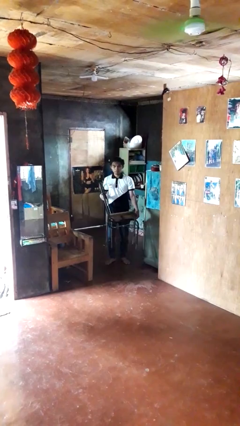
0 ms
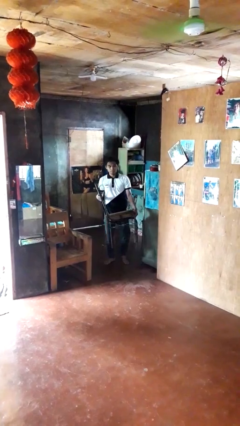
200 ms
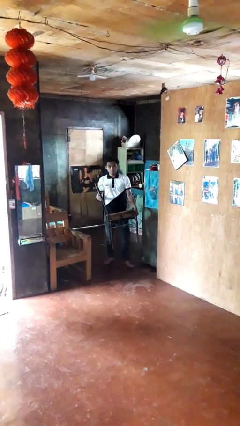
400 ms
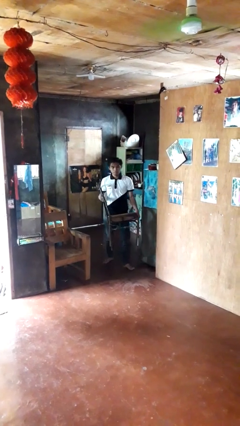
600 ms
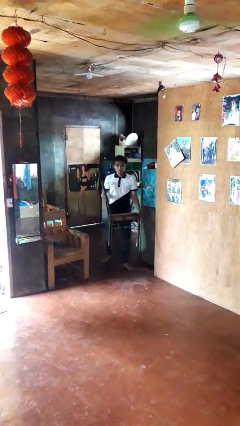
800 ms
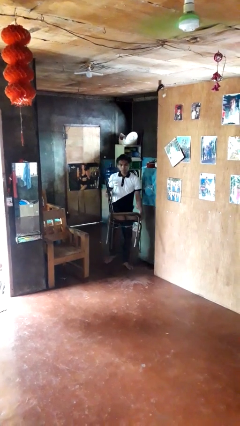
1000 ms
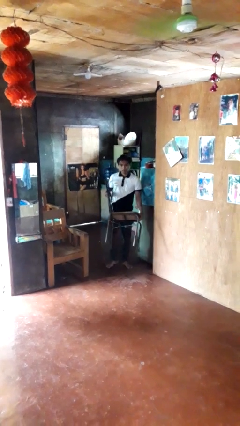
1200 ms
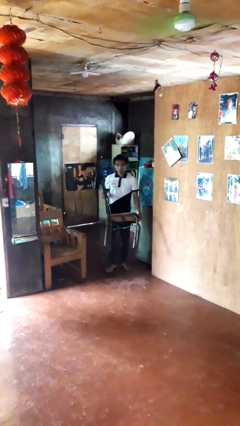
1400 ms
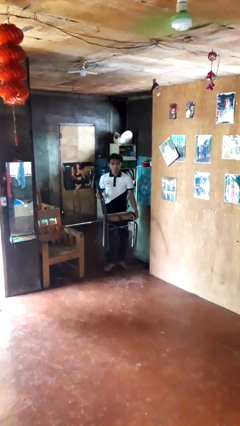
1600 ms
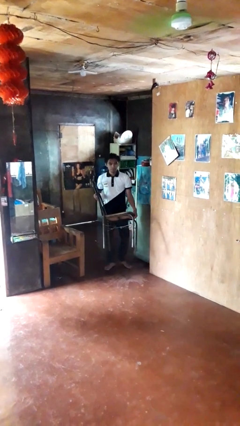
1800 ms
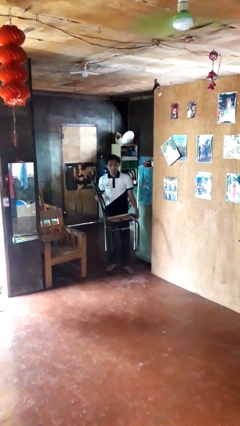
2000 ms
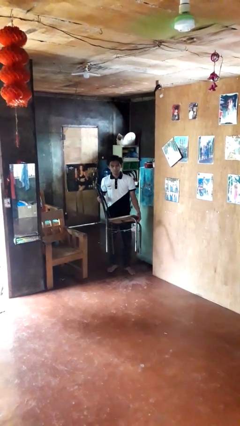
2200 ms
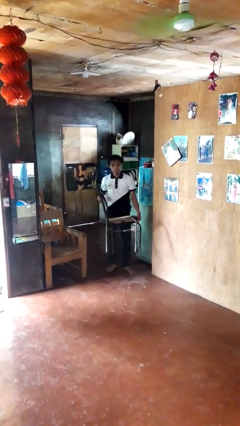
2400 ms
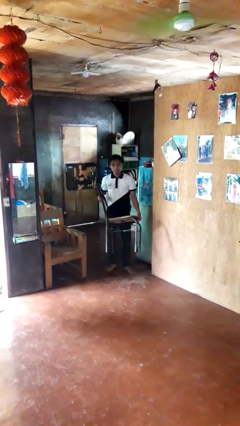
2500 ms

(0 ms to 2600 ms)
person carries furniture

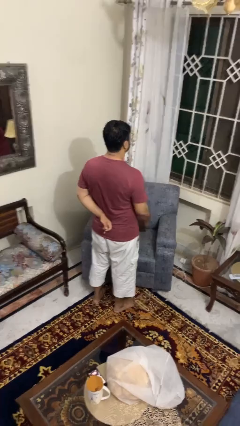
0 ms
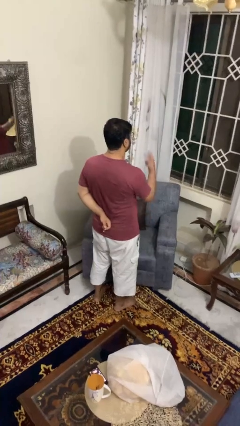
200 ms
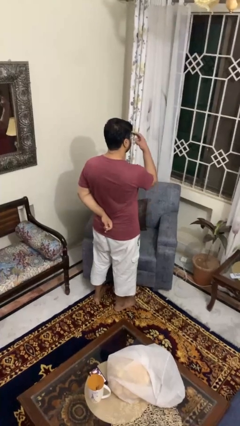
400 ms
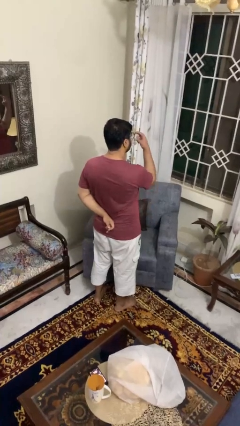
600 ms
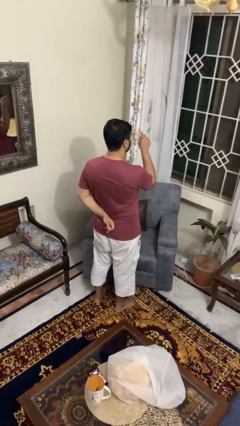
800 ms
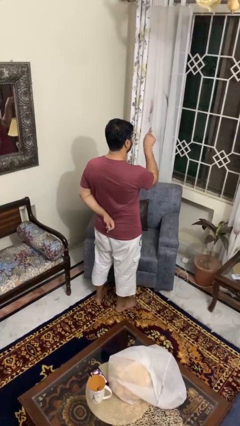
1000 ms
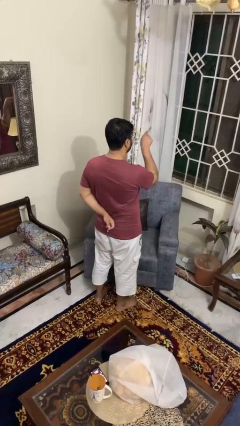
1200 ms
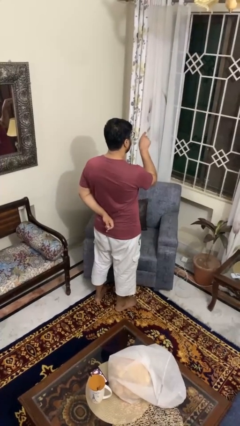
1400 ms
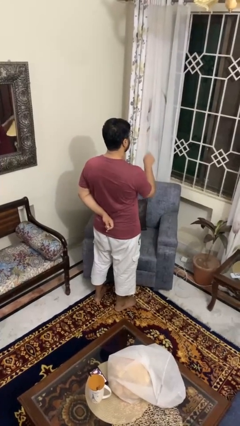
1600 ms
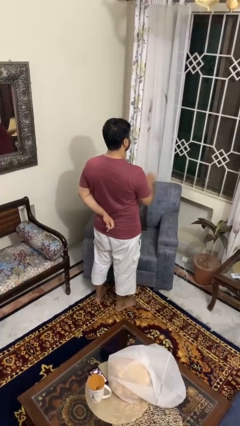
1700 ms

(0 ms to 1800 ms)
person gestures watch closely

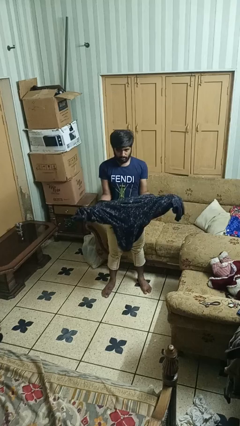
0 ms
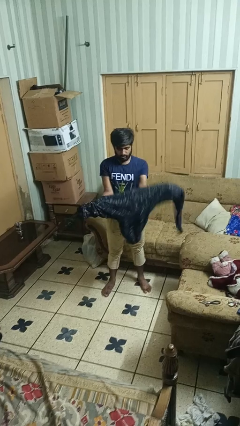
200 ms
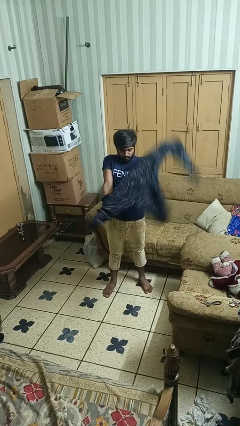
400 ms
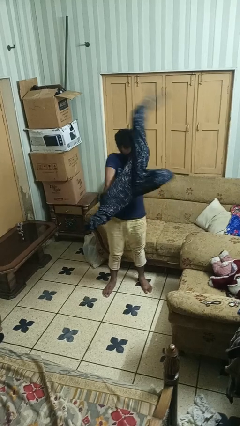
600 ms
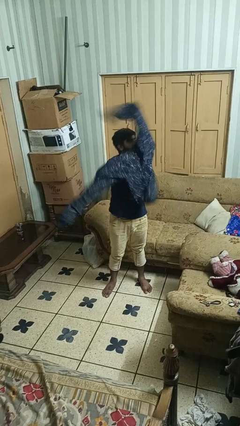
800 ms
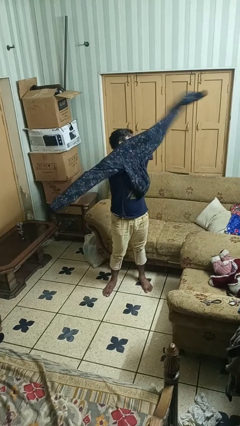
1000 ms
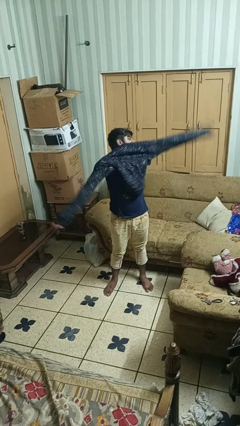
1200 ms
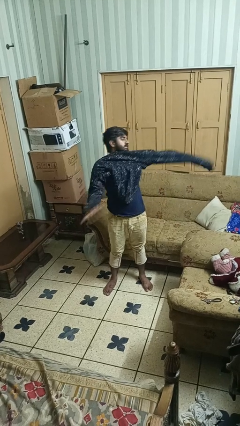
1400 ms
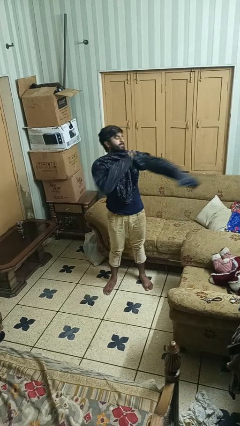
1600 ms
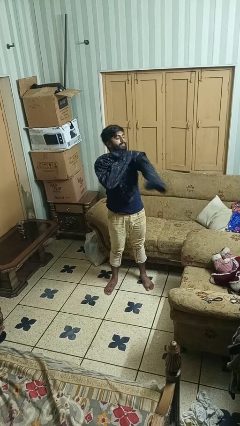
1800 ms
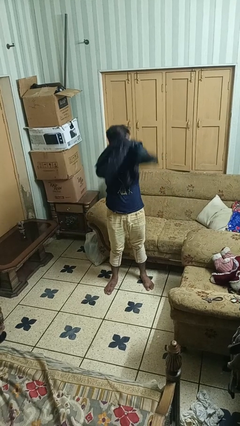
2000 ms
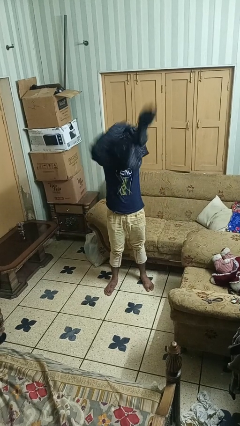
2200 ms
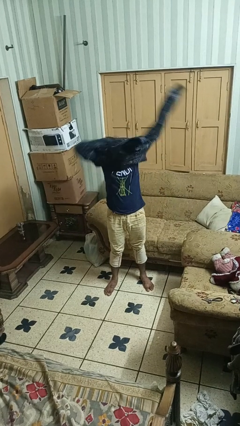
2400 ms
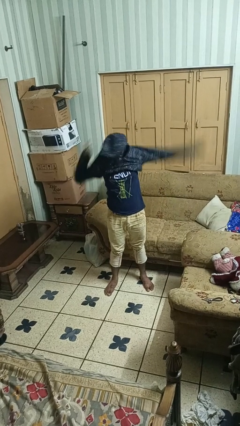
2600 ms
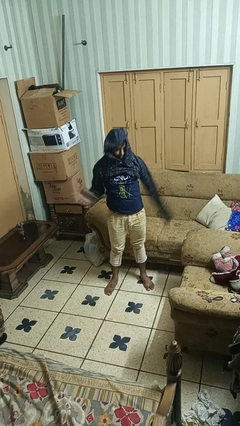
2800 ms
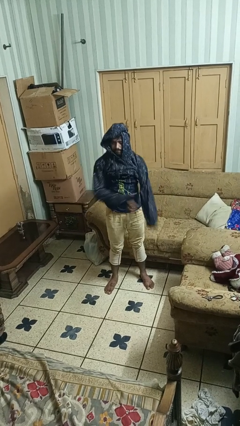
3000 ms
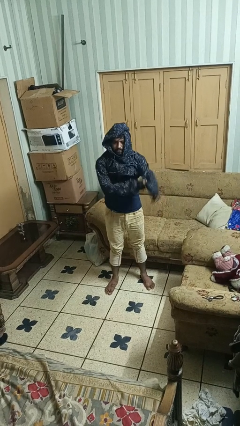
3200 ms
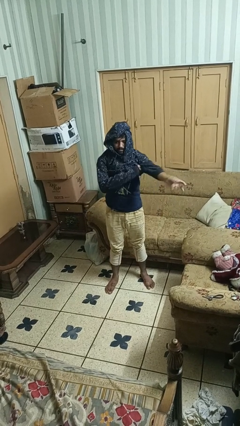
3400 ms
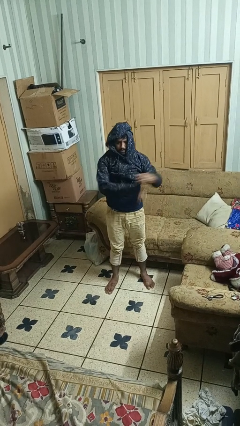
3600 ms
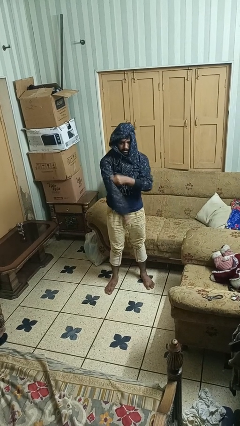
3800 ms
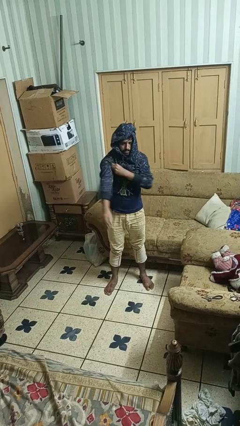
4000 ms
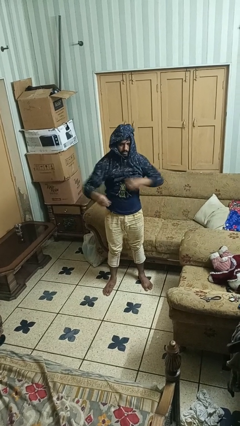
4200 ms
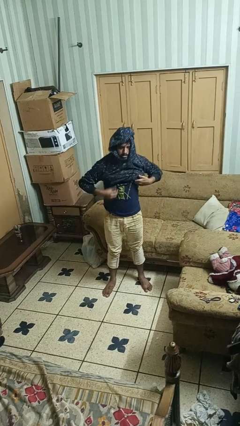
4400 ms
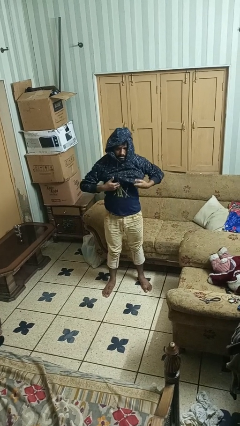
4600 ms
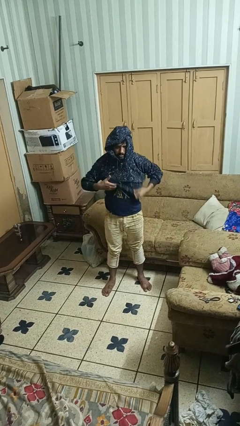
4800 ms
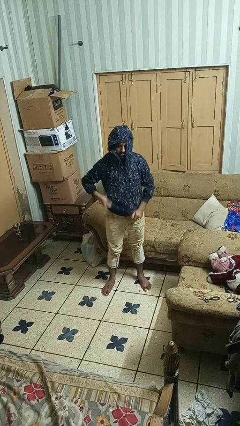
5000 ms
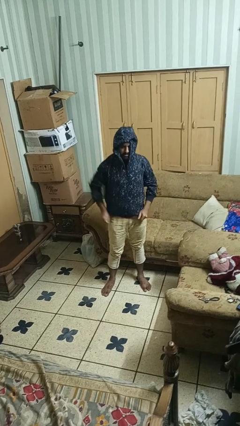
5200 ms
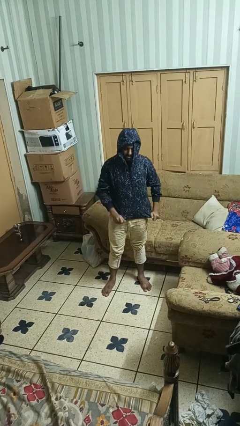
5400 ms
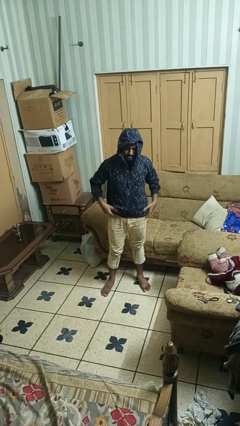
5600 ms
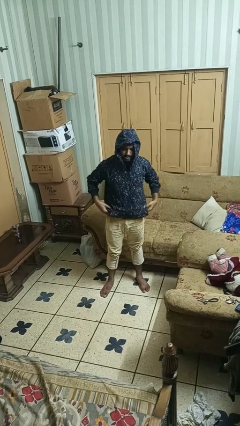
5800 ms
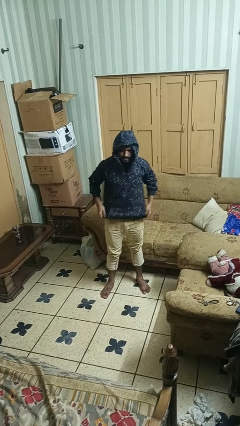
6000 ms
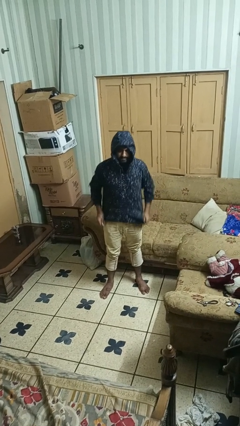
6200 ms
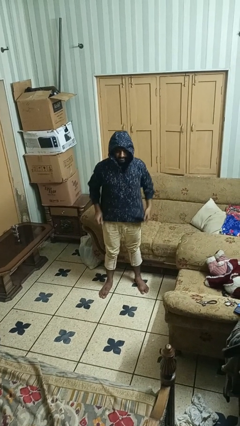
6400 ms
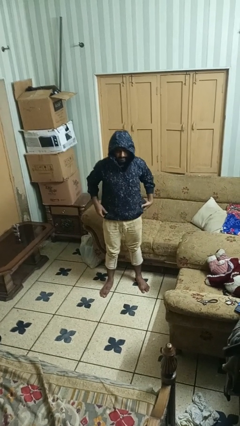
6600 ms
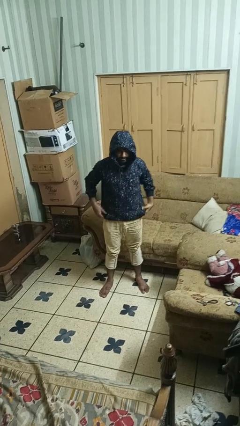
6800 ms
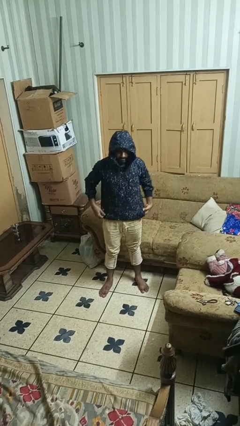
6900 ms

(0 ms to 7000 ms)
person puts on hoodie

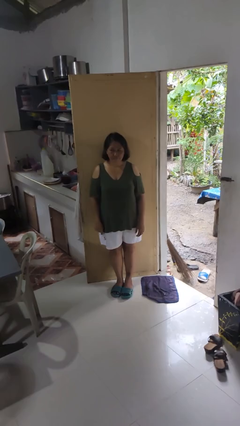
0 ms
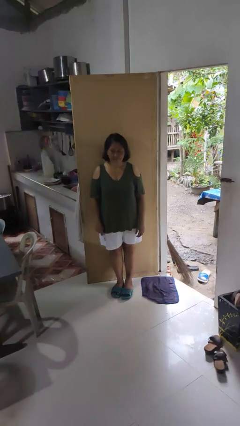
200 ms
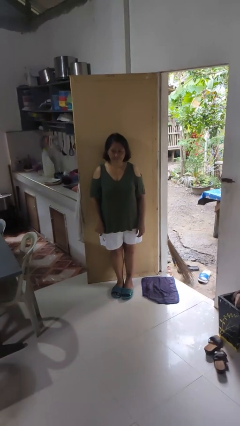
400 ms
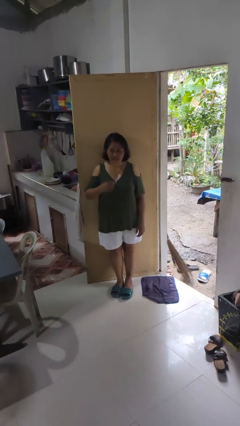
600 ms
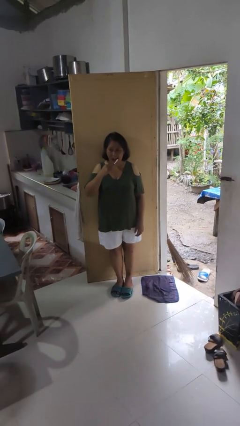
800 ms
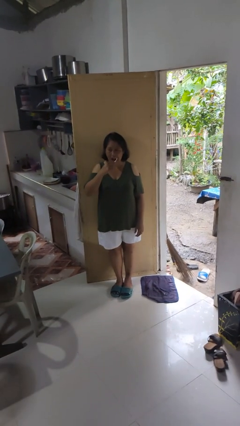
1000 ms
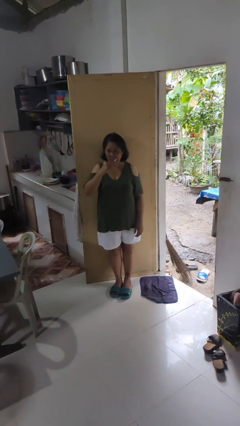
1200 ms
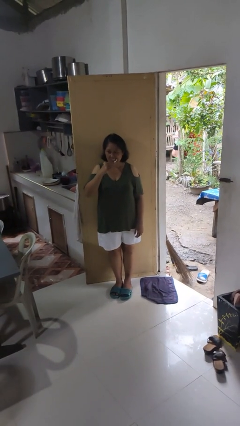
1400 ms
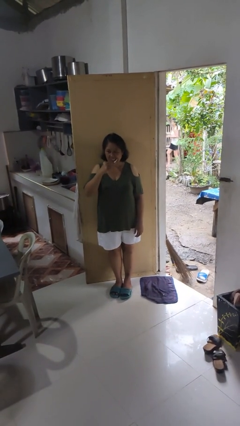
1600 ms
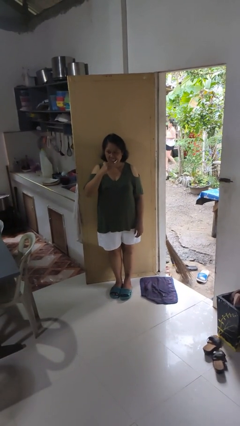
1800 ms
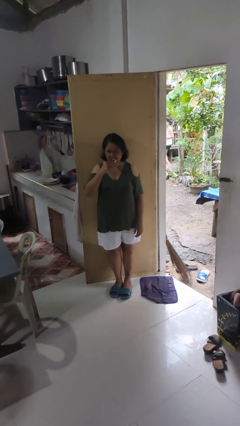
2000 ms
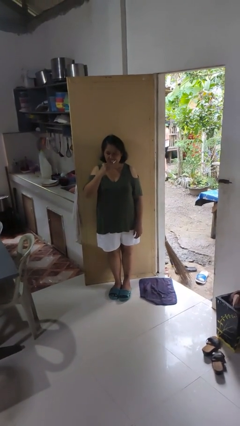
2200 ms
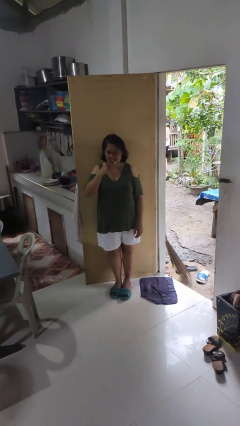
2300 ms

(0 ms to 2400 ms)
person brushes teeth

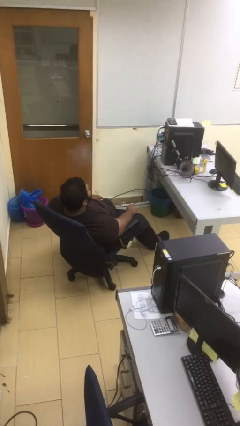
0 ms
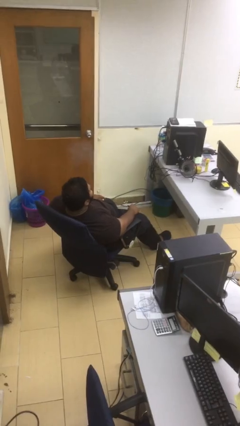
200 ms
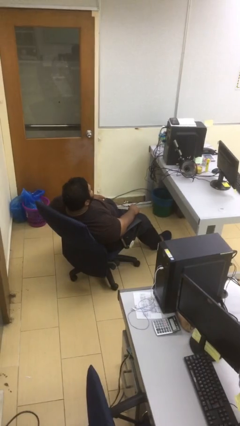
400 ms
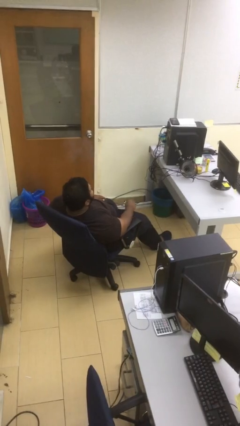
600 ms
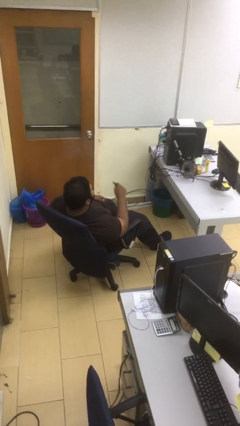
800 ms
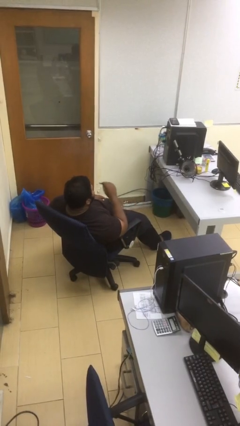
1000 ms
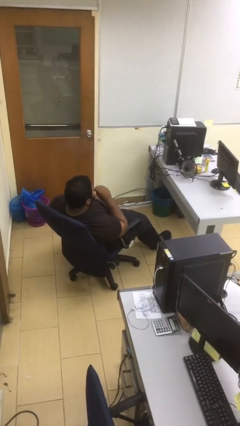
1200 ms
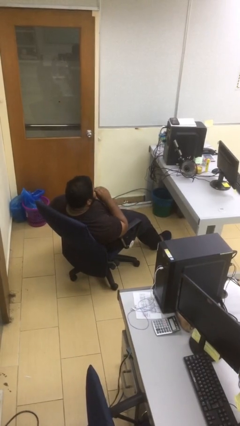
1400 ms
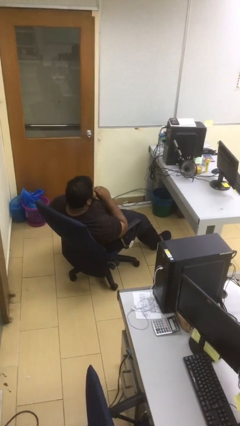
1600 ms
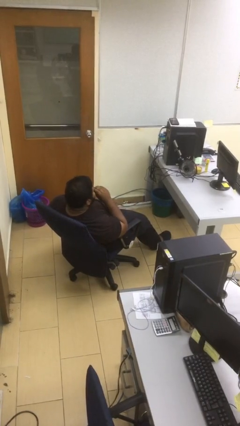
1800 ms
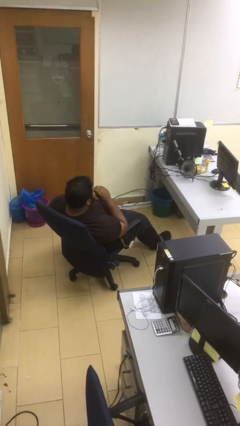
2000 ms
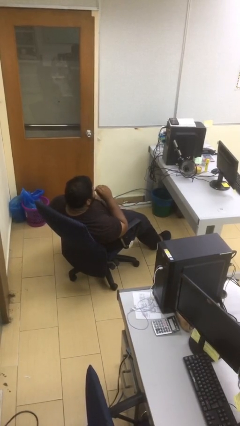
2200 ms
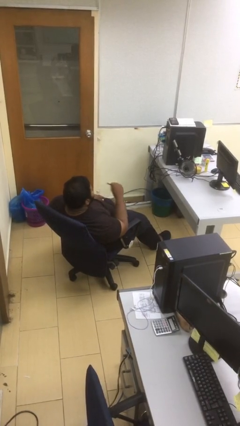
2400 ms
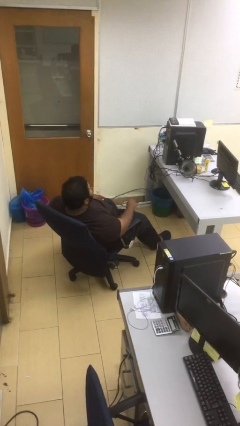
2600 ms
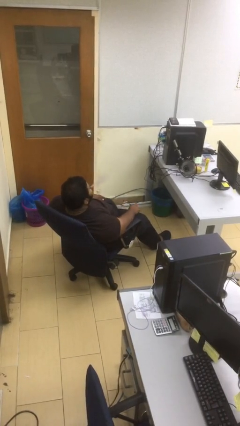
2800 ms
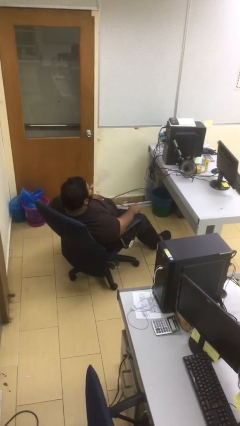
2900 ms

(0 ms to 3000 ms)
person vapes

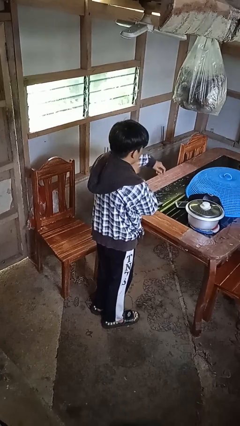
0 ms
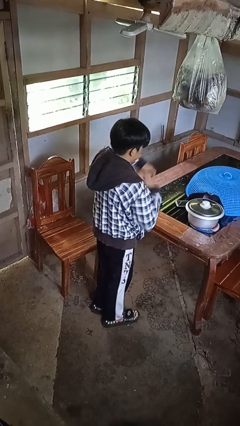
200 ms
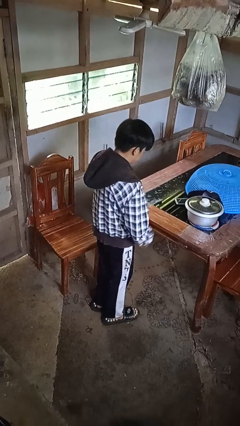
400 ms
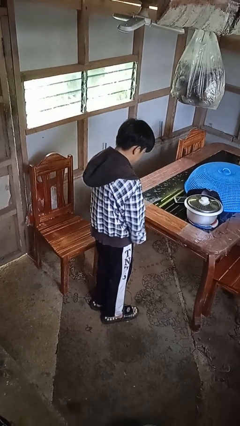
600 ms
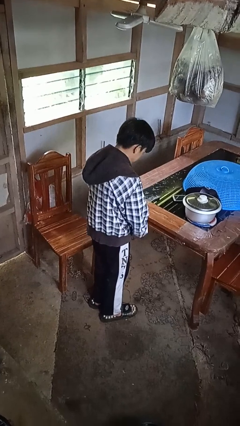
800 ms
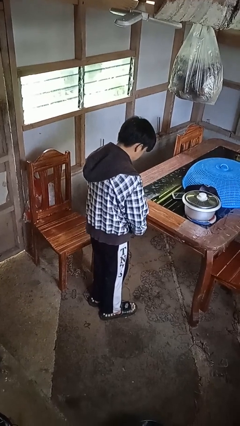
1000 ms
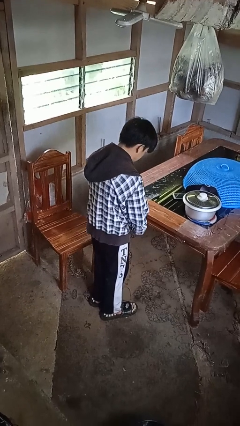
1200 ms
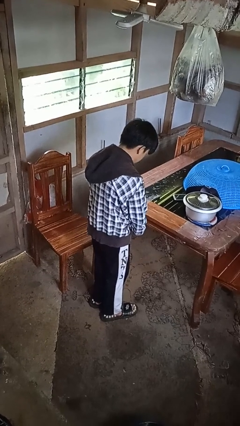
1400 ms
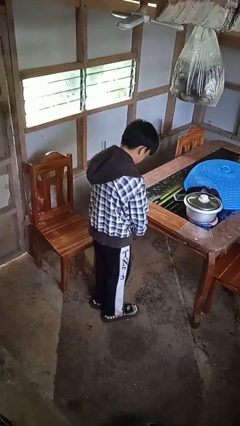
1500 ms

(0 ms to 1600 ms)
person zips up jacket
